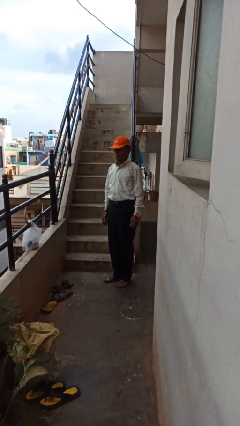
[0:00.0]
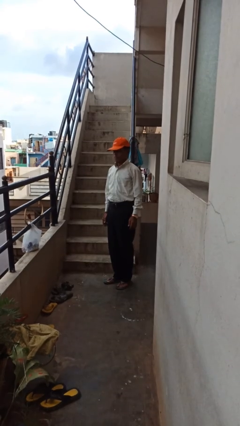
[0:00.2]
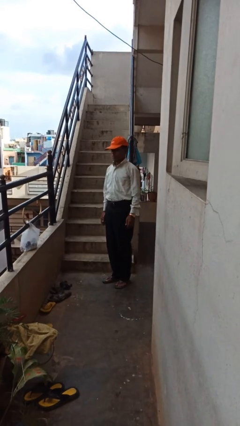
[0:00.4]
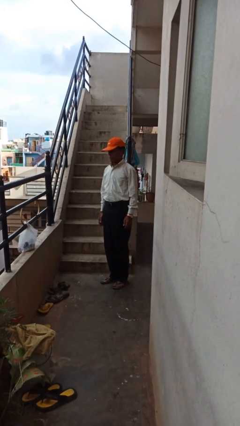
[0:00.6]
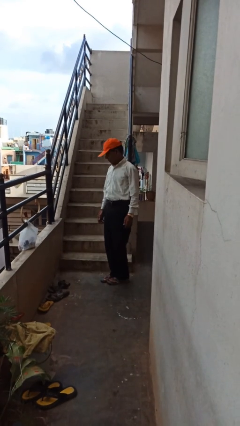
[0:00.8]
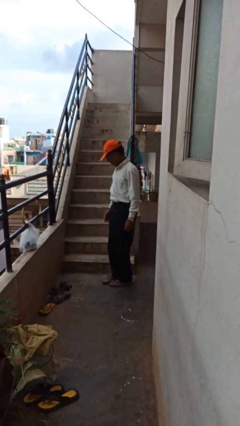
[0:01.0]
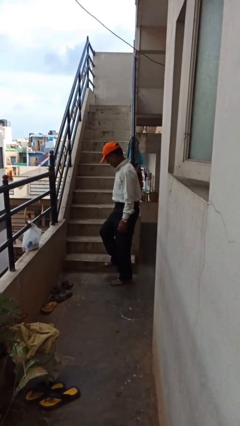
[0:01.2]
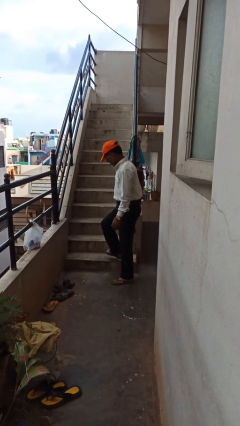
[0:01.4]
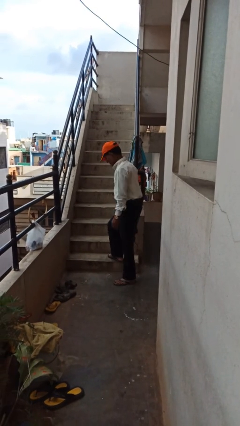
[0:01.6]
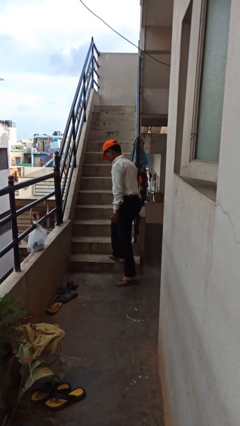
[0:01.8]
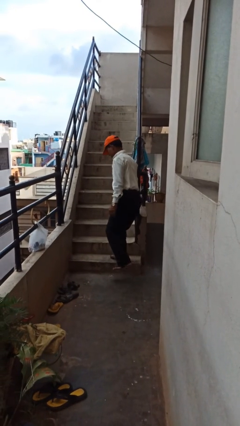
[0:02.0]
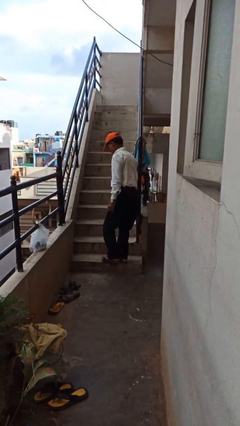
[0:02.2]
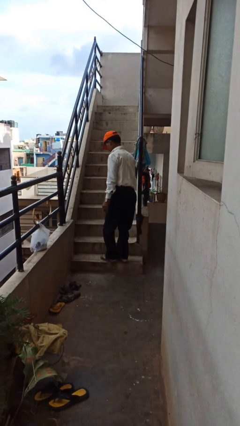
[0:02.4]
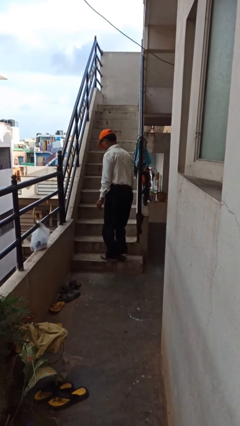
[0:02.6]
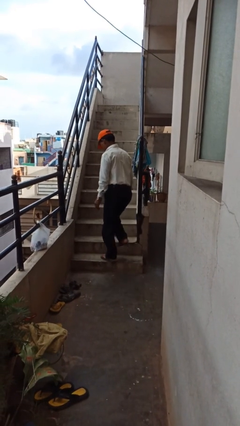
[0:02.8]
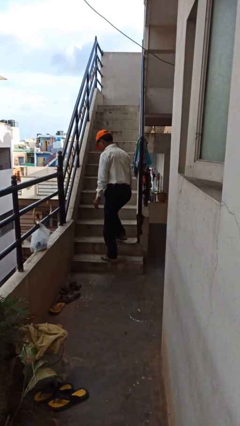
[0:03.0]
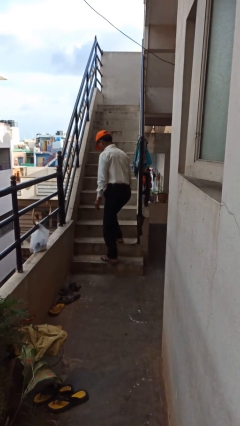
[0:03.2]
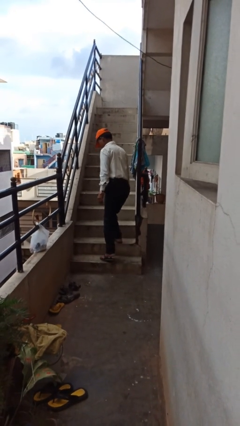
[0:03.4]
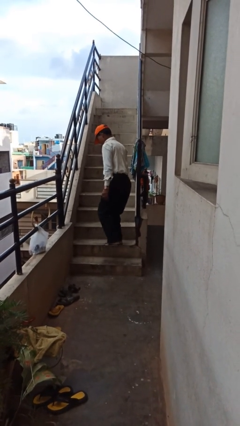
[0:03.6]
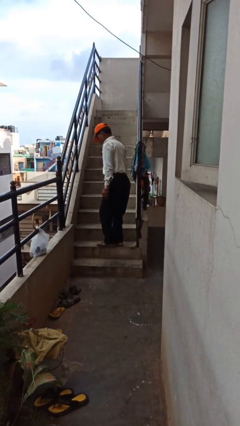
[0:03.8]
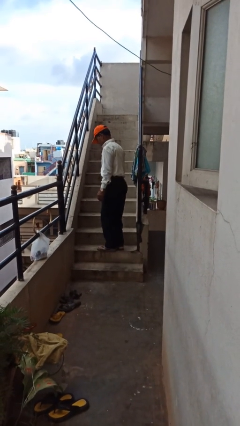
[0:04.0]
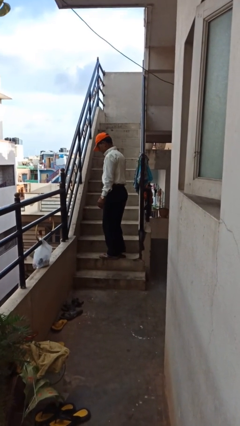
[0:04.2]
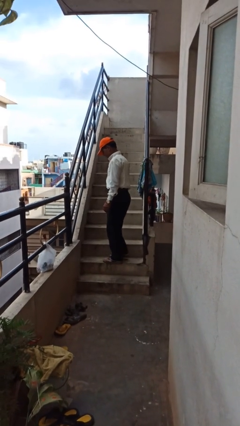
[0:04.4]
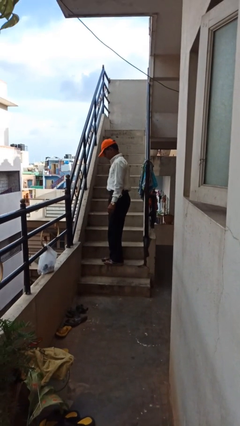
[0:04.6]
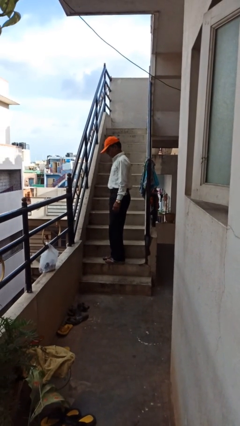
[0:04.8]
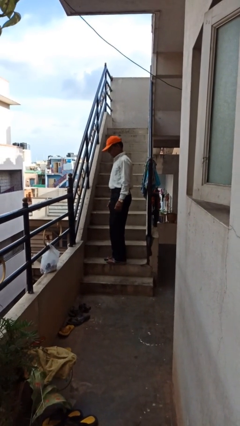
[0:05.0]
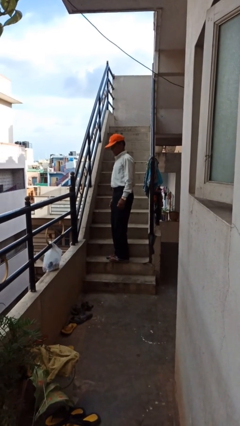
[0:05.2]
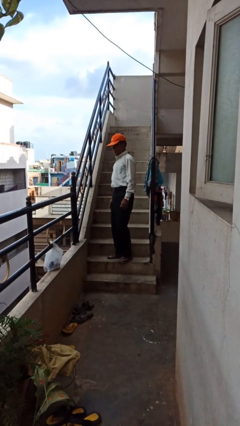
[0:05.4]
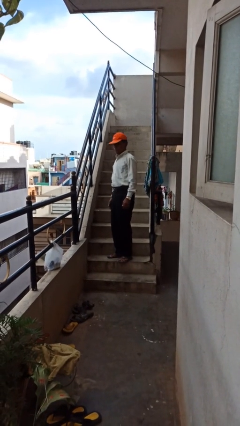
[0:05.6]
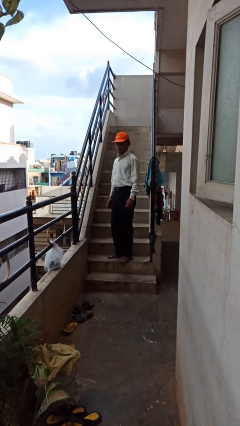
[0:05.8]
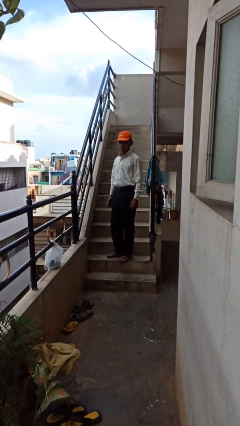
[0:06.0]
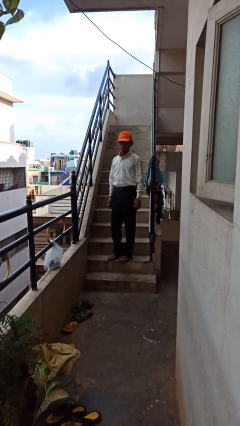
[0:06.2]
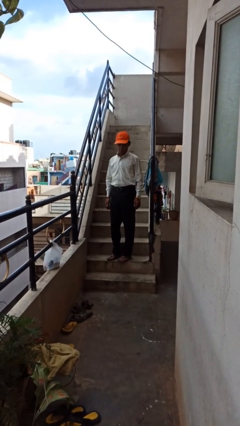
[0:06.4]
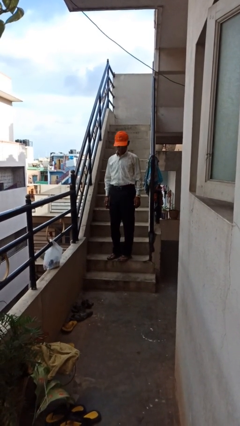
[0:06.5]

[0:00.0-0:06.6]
person climbs up stairs

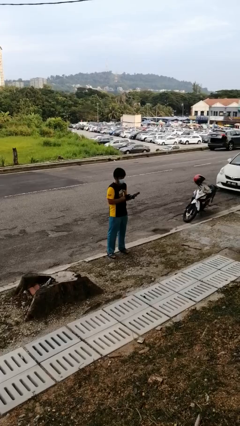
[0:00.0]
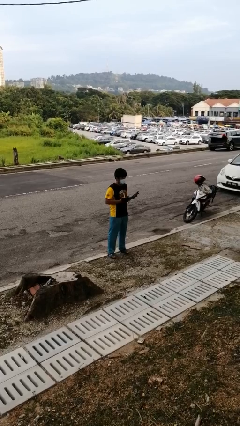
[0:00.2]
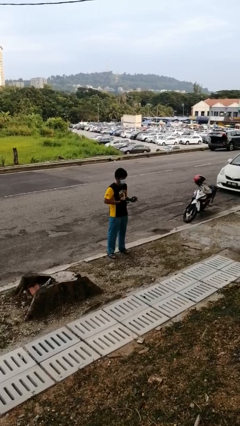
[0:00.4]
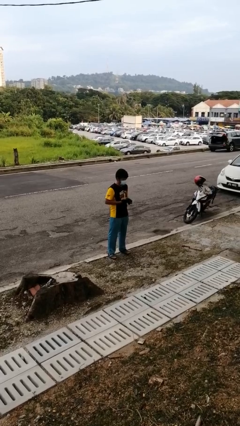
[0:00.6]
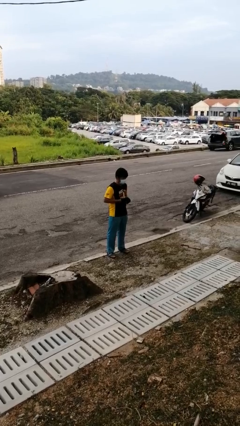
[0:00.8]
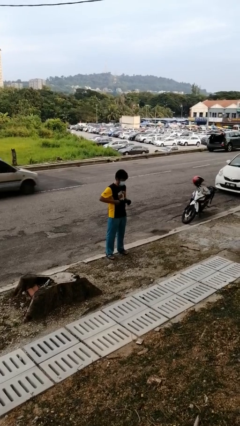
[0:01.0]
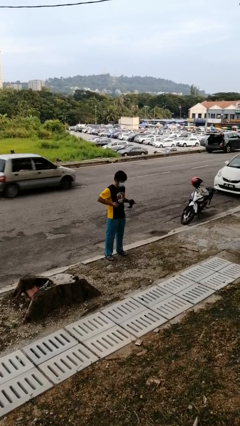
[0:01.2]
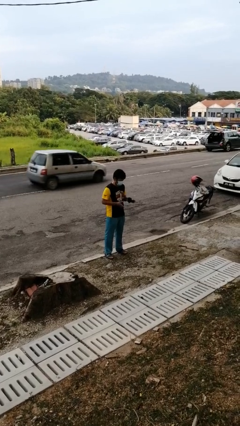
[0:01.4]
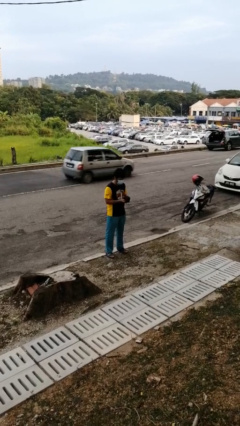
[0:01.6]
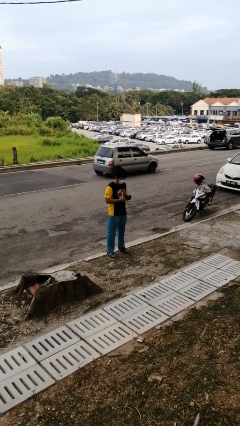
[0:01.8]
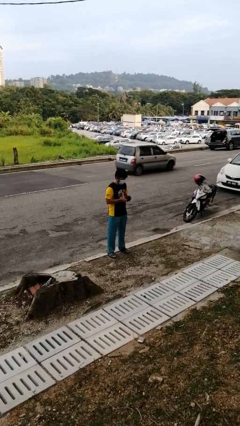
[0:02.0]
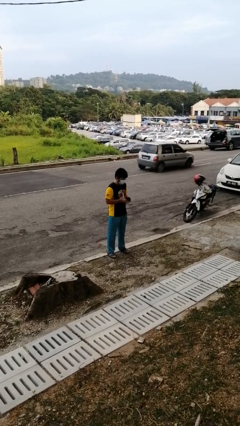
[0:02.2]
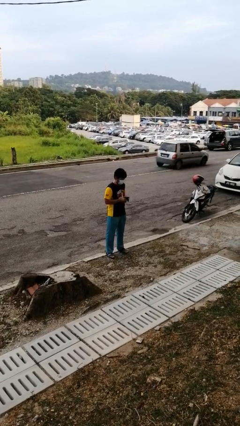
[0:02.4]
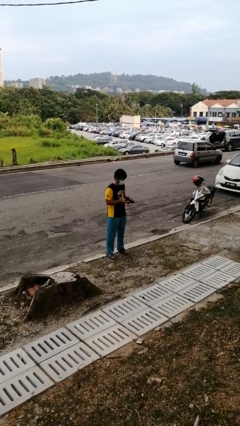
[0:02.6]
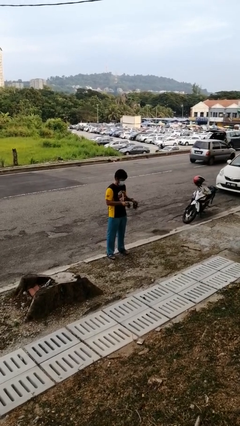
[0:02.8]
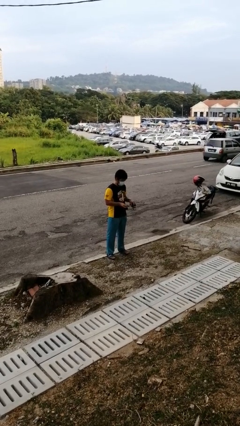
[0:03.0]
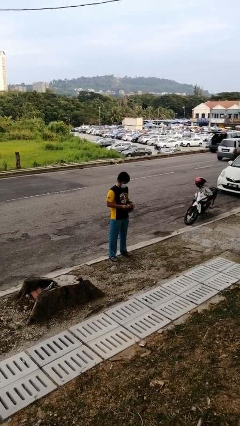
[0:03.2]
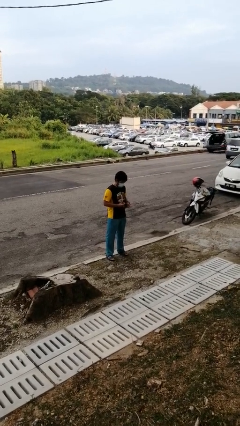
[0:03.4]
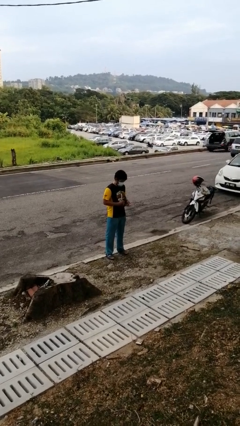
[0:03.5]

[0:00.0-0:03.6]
person takes off gloves

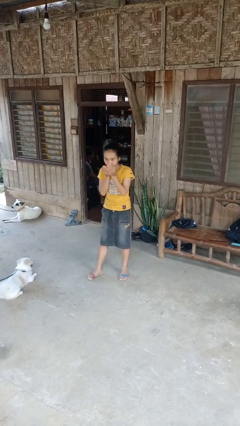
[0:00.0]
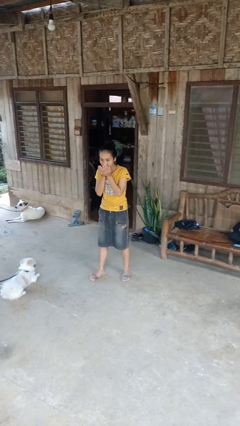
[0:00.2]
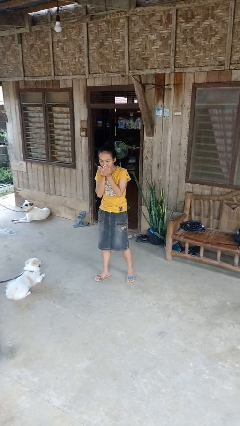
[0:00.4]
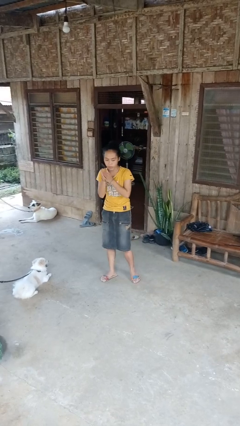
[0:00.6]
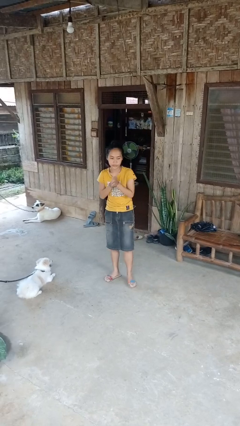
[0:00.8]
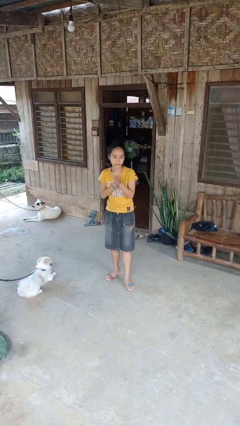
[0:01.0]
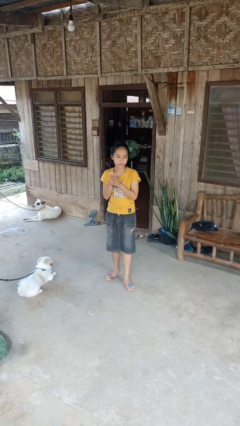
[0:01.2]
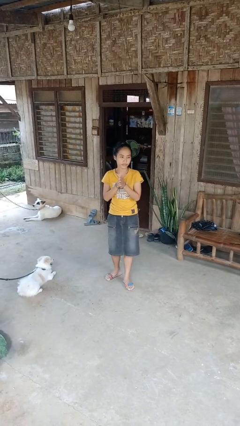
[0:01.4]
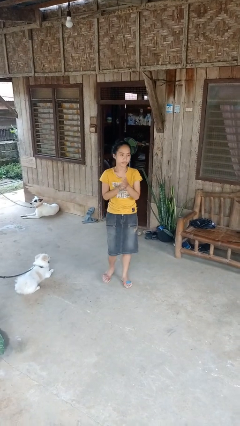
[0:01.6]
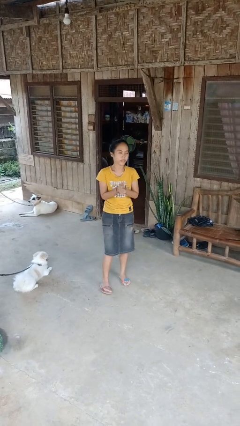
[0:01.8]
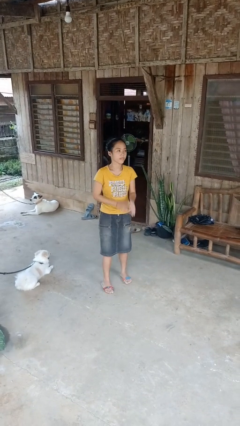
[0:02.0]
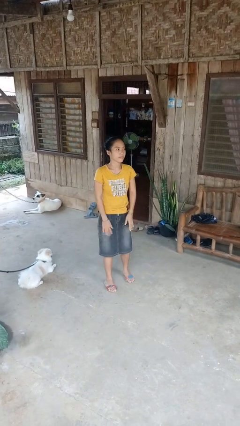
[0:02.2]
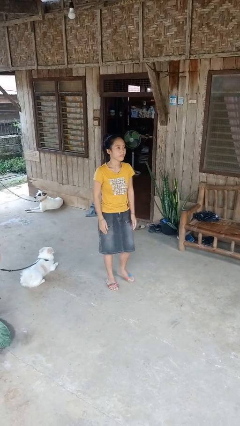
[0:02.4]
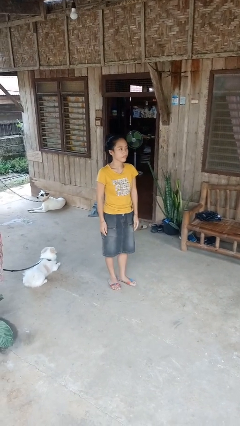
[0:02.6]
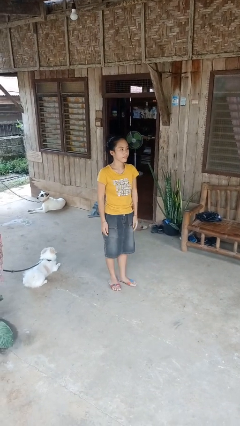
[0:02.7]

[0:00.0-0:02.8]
person blows into hands

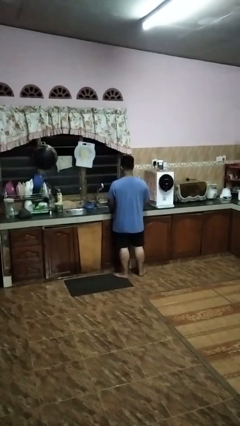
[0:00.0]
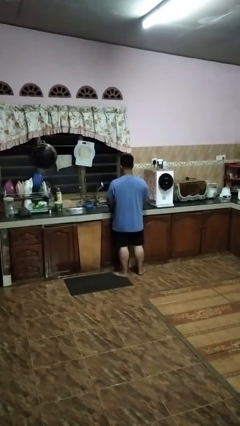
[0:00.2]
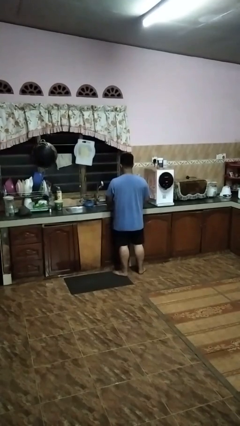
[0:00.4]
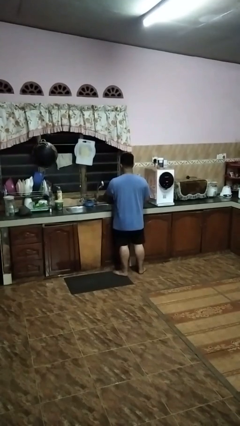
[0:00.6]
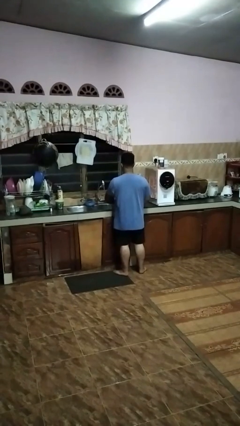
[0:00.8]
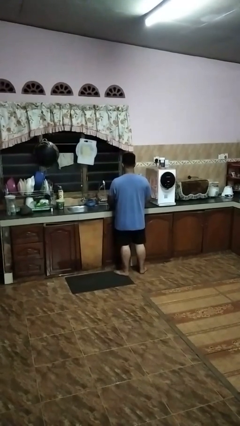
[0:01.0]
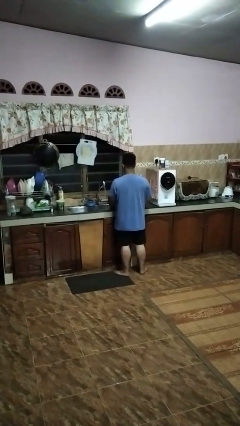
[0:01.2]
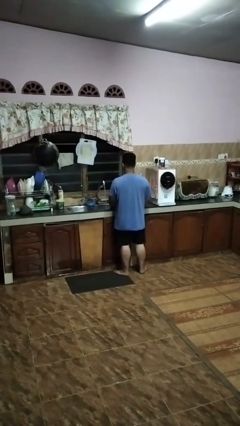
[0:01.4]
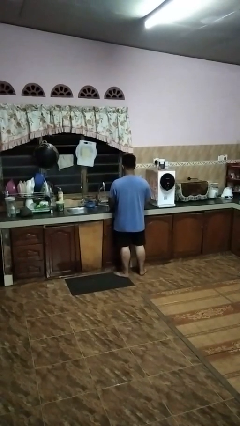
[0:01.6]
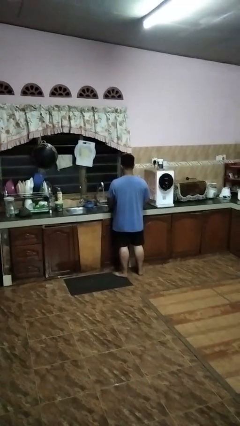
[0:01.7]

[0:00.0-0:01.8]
person turns on faucet

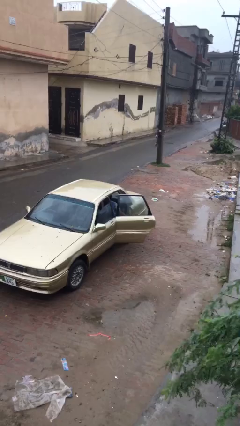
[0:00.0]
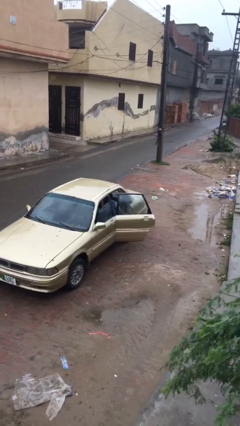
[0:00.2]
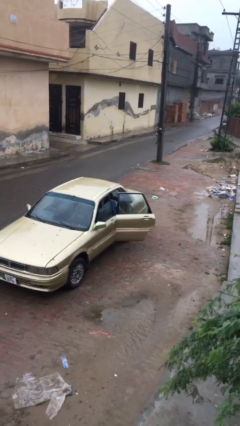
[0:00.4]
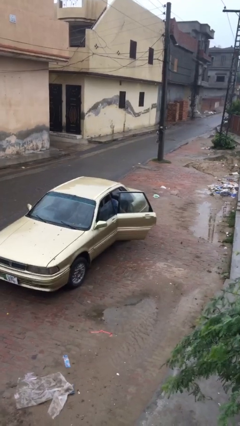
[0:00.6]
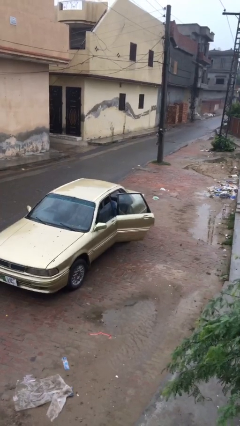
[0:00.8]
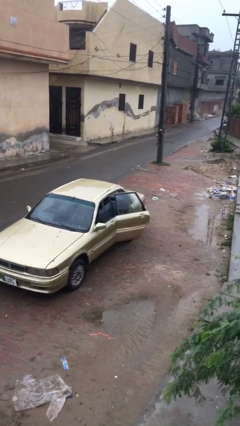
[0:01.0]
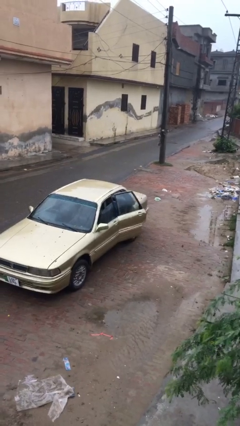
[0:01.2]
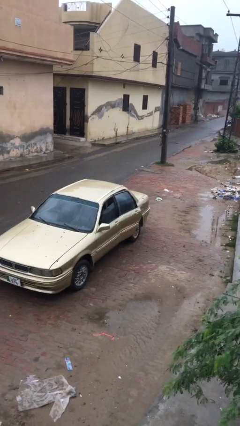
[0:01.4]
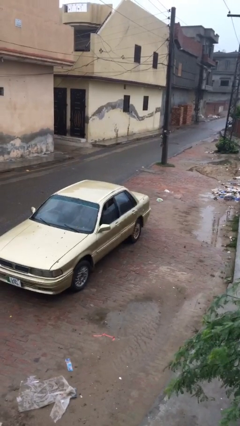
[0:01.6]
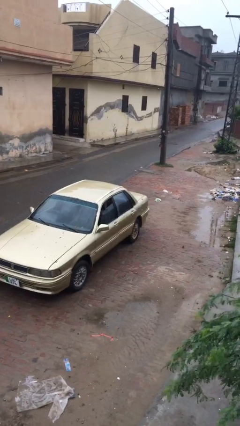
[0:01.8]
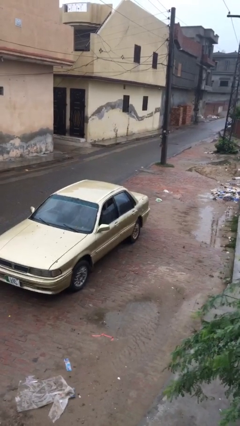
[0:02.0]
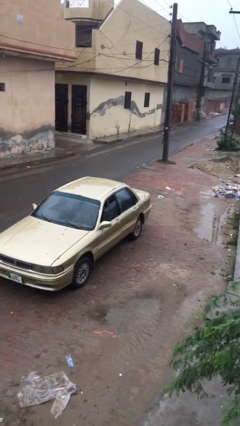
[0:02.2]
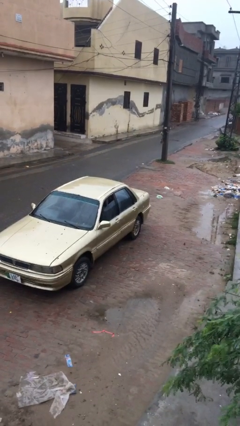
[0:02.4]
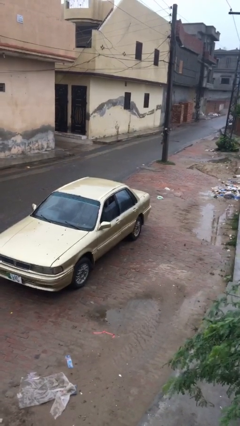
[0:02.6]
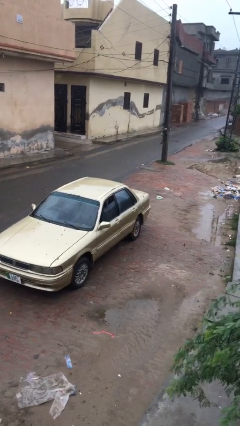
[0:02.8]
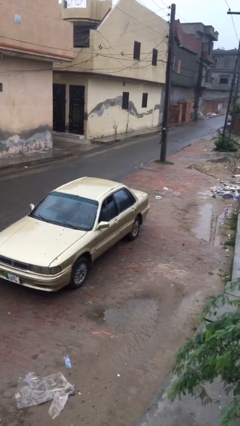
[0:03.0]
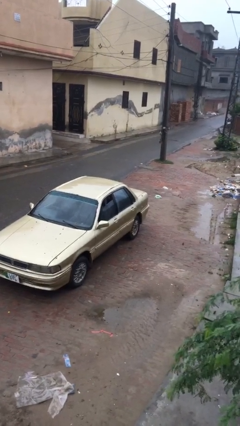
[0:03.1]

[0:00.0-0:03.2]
person closes car door
